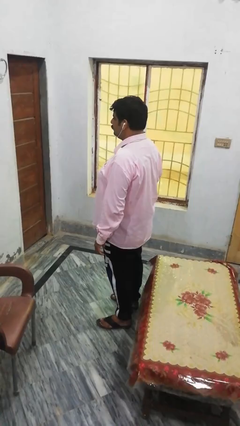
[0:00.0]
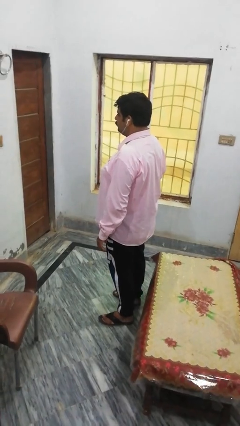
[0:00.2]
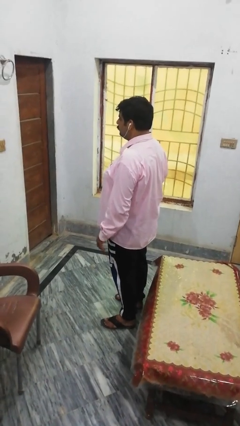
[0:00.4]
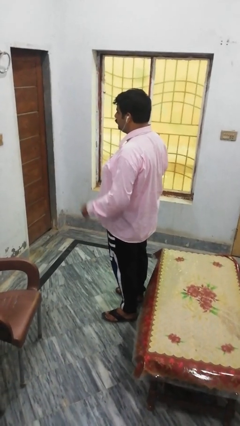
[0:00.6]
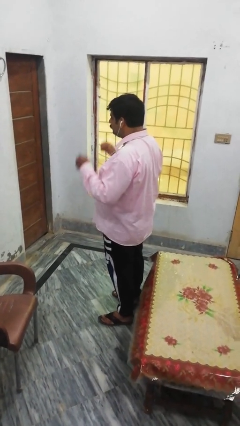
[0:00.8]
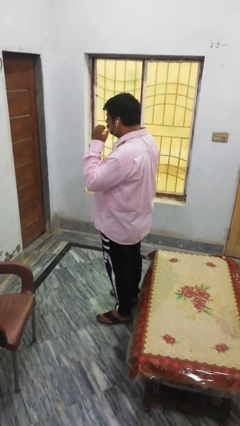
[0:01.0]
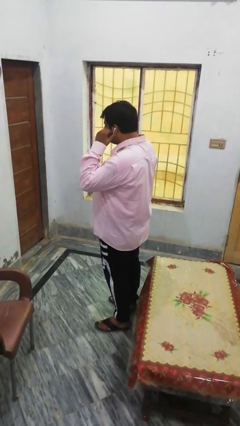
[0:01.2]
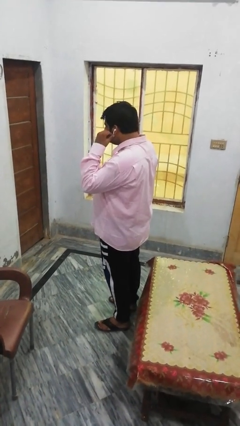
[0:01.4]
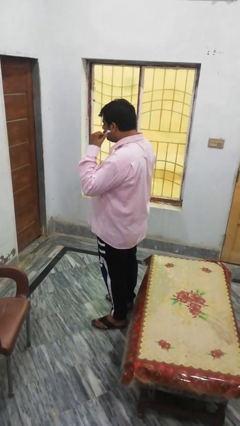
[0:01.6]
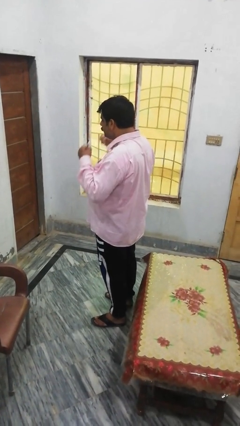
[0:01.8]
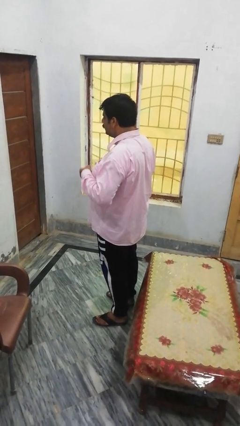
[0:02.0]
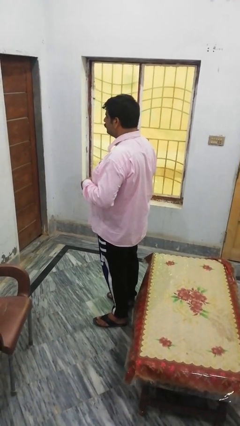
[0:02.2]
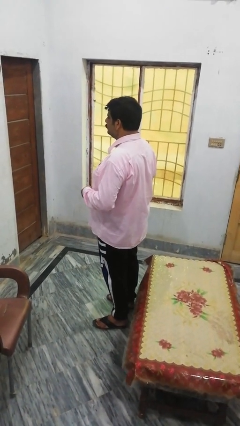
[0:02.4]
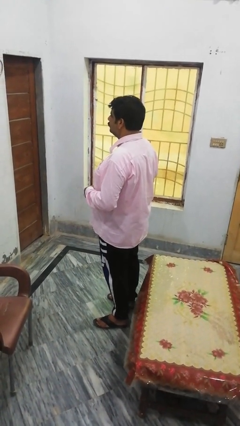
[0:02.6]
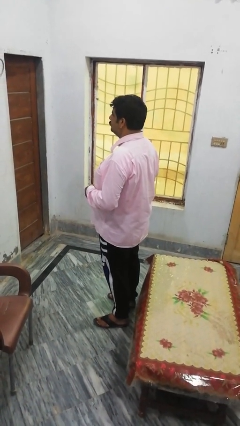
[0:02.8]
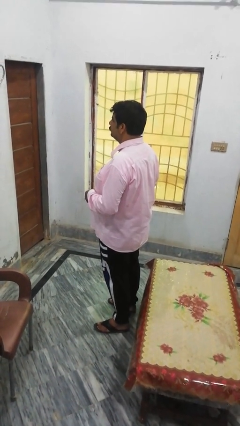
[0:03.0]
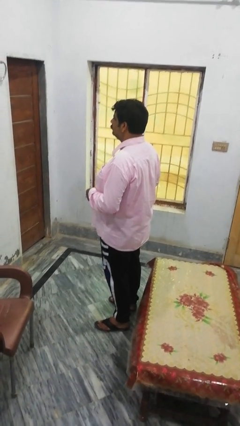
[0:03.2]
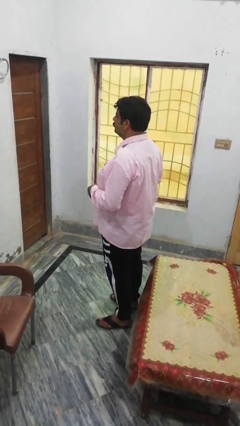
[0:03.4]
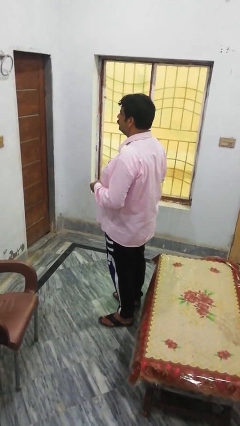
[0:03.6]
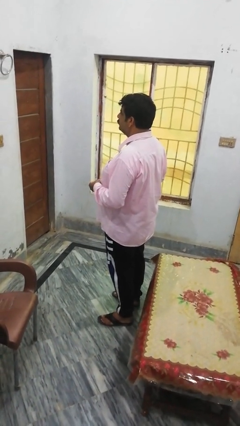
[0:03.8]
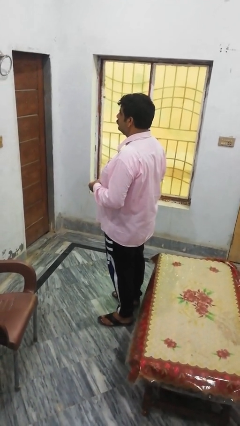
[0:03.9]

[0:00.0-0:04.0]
person takes off headphones

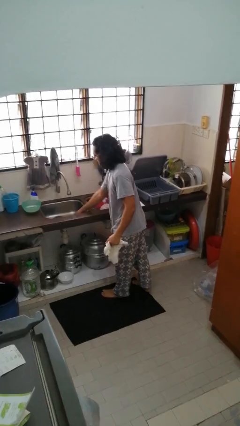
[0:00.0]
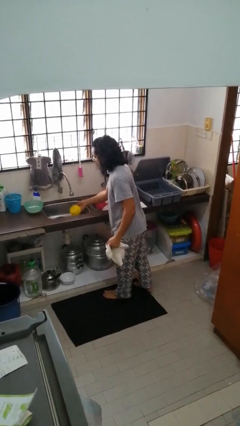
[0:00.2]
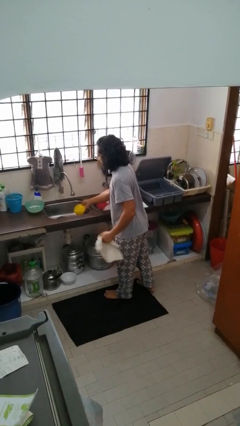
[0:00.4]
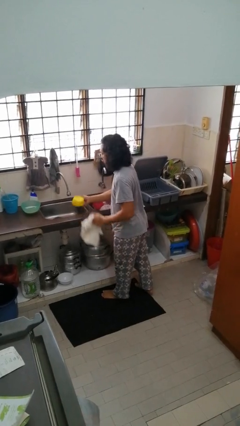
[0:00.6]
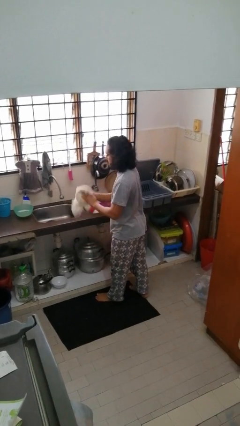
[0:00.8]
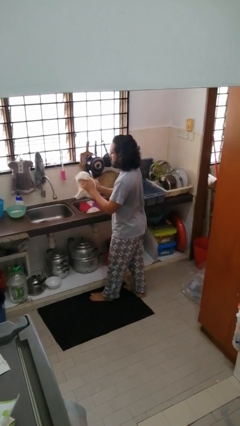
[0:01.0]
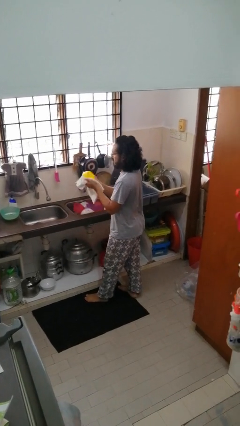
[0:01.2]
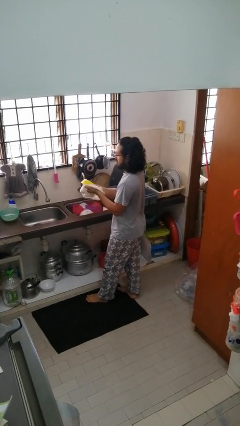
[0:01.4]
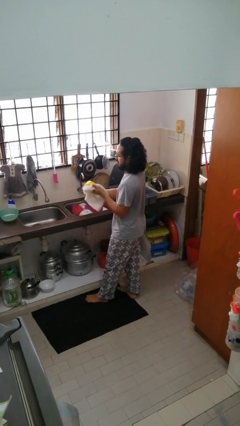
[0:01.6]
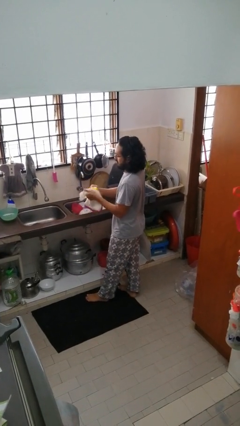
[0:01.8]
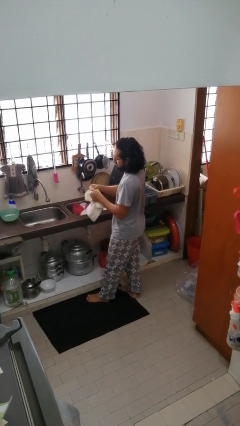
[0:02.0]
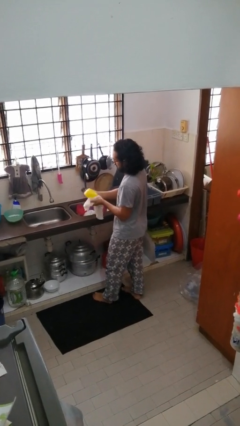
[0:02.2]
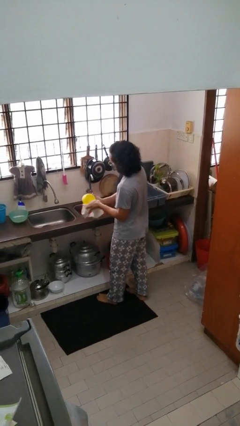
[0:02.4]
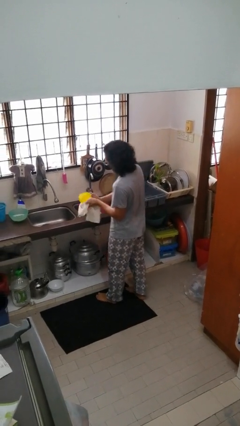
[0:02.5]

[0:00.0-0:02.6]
person dries dish

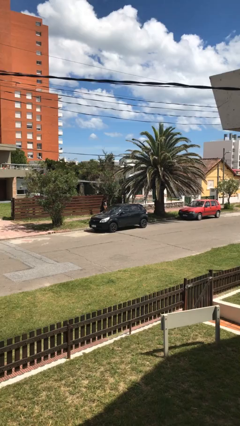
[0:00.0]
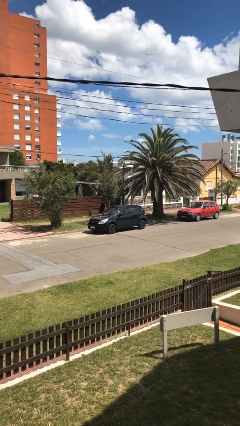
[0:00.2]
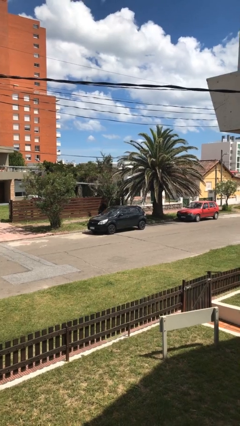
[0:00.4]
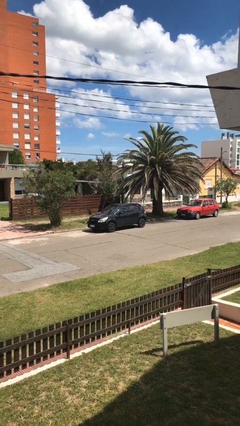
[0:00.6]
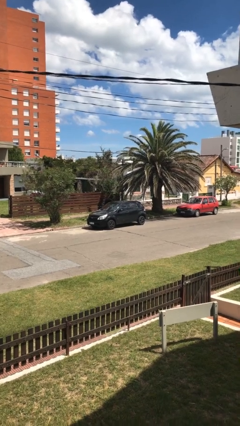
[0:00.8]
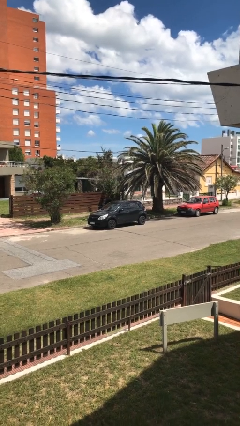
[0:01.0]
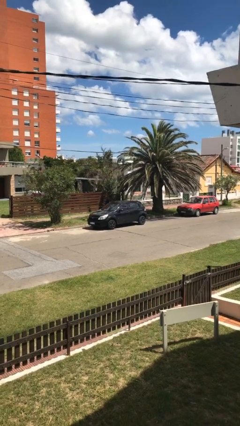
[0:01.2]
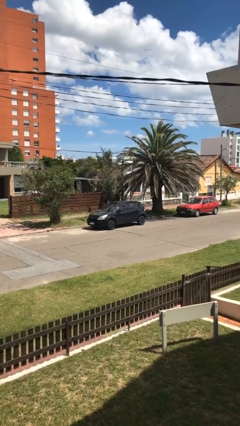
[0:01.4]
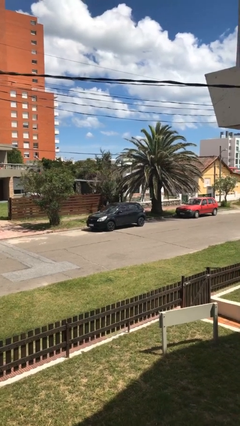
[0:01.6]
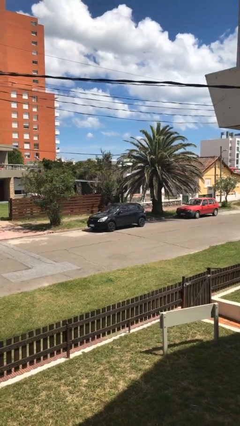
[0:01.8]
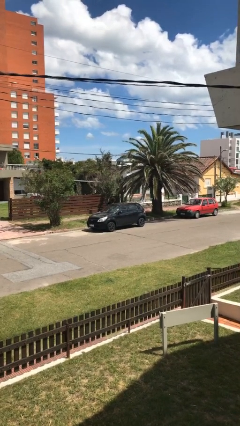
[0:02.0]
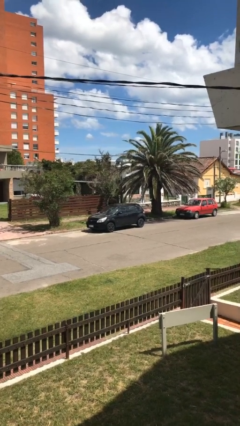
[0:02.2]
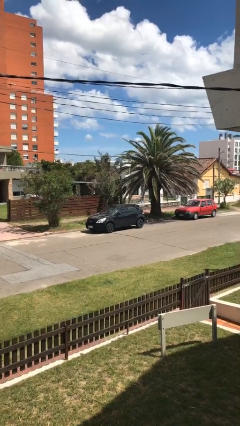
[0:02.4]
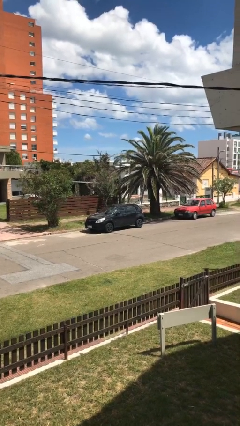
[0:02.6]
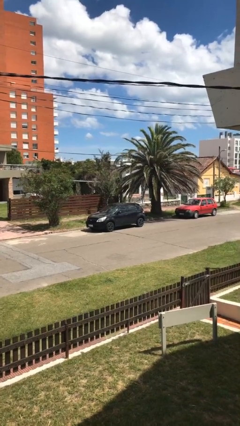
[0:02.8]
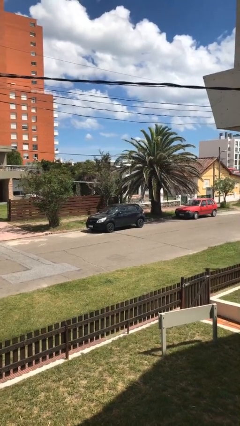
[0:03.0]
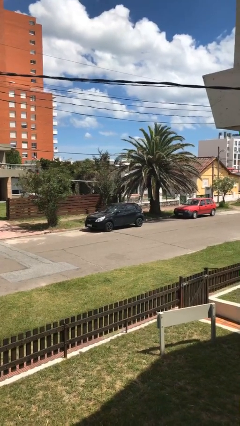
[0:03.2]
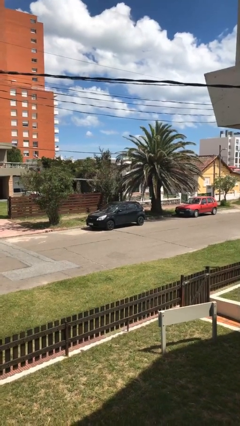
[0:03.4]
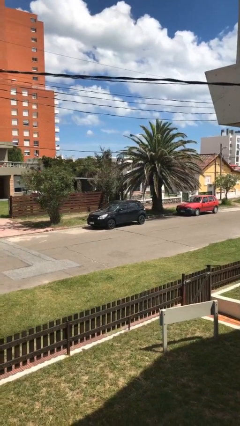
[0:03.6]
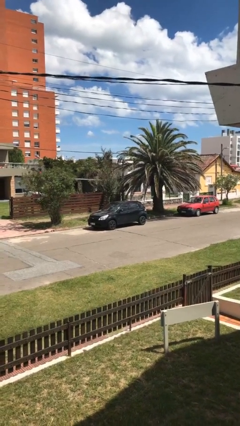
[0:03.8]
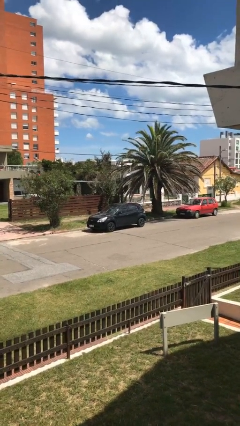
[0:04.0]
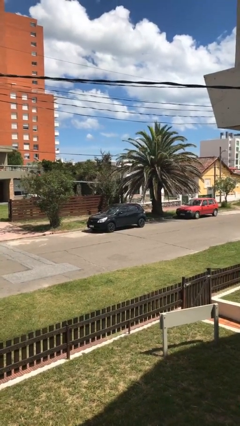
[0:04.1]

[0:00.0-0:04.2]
car picks up person

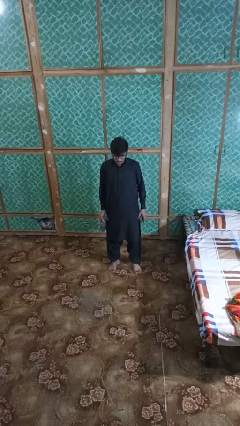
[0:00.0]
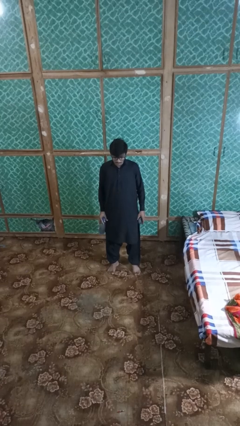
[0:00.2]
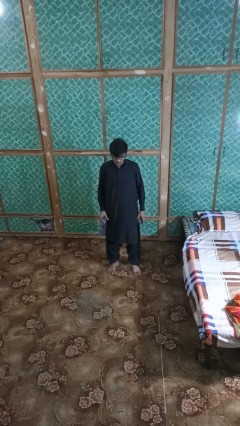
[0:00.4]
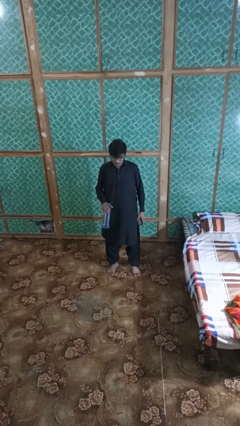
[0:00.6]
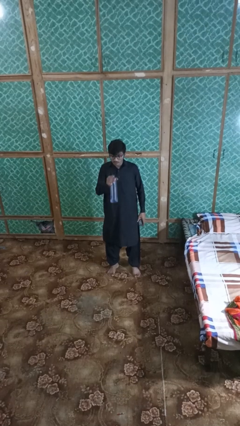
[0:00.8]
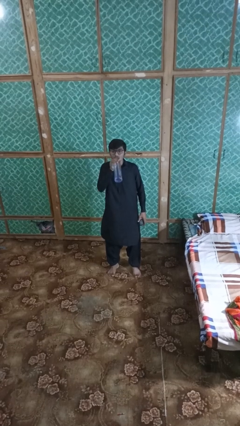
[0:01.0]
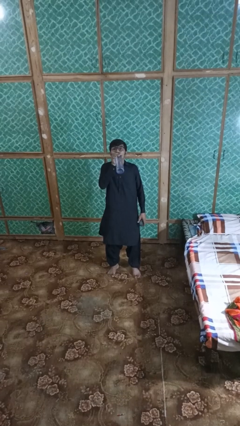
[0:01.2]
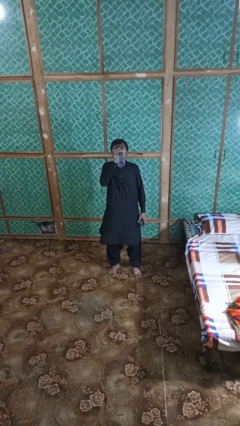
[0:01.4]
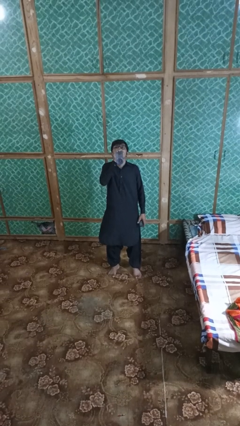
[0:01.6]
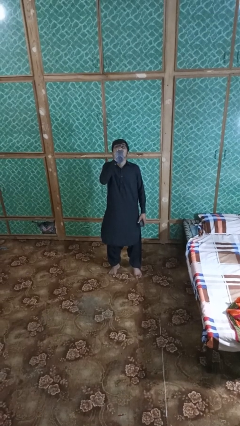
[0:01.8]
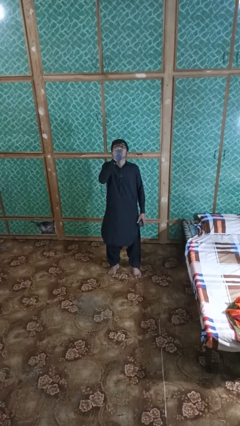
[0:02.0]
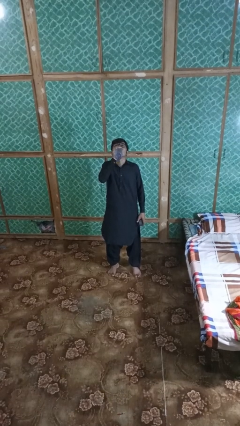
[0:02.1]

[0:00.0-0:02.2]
person drinks from bottle

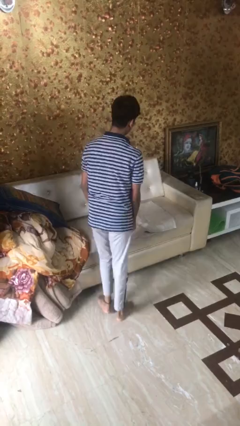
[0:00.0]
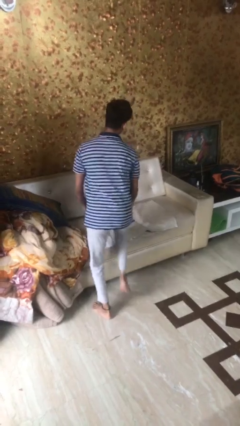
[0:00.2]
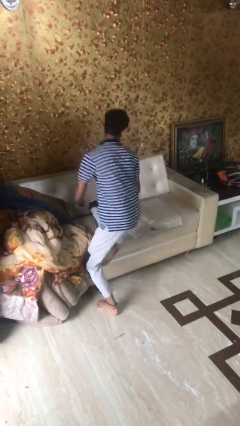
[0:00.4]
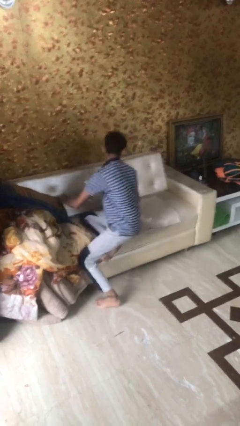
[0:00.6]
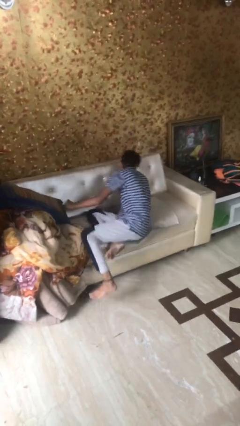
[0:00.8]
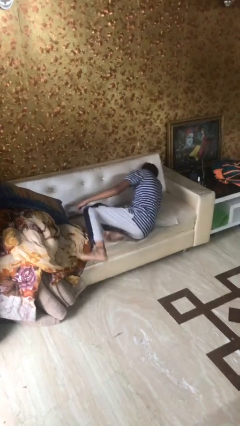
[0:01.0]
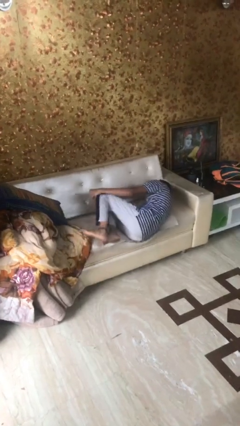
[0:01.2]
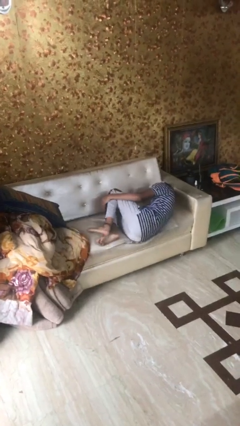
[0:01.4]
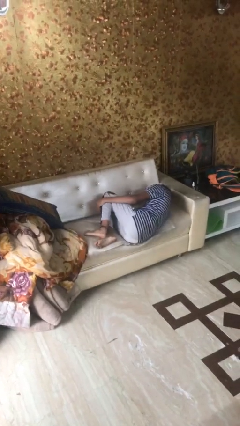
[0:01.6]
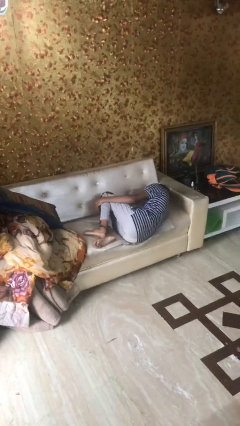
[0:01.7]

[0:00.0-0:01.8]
person lies down on couch

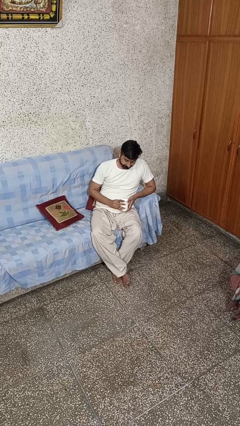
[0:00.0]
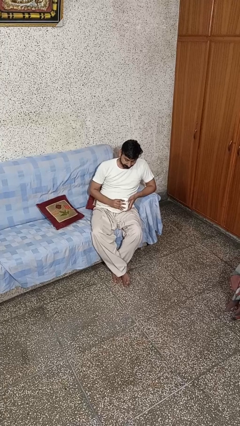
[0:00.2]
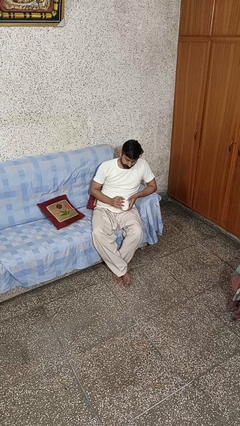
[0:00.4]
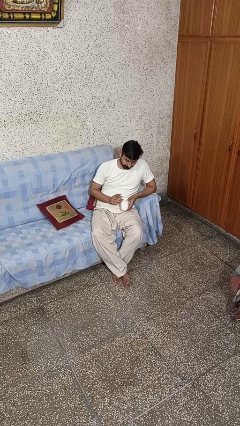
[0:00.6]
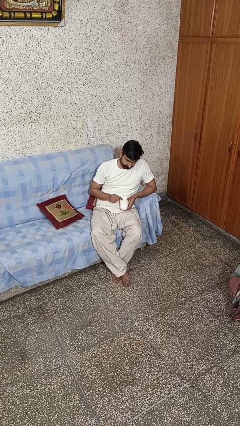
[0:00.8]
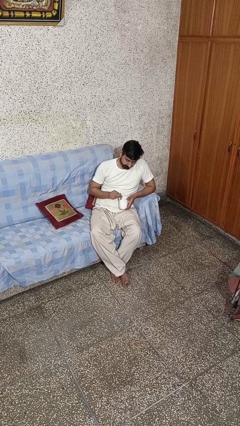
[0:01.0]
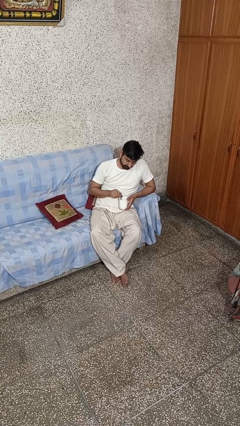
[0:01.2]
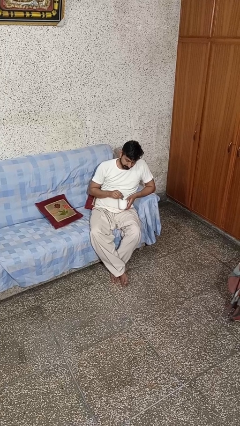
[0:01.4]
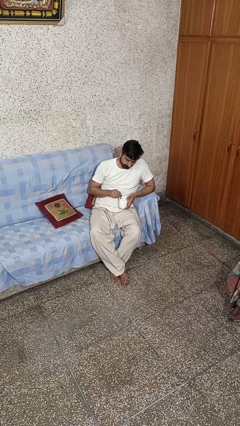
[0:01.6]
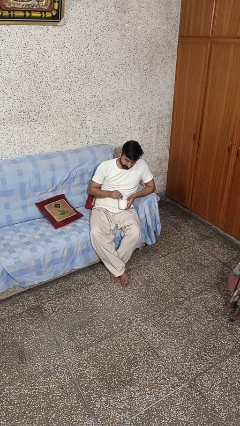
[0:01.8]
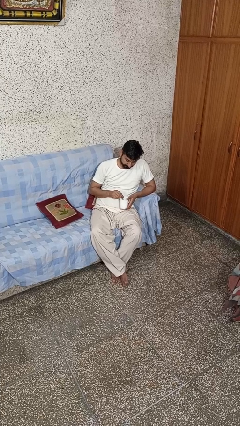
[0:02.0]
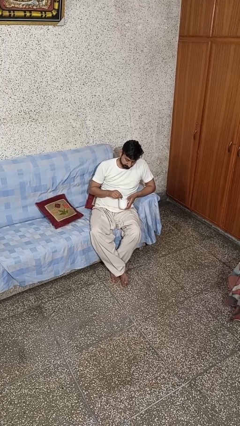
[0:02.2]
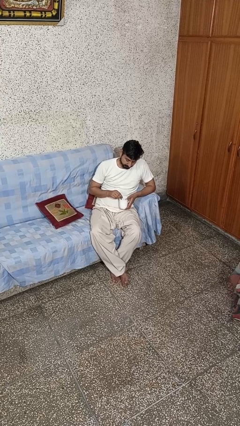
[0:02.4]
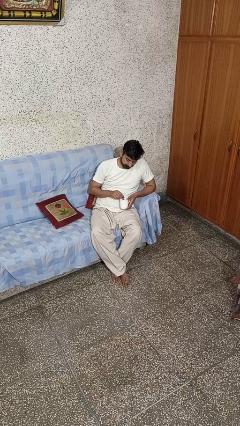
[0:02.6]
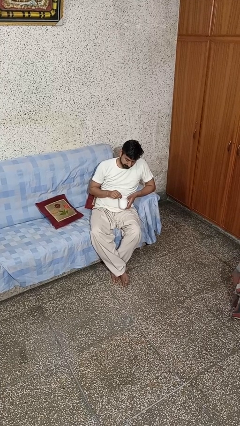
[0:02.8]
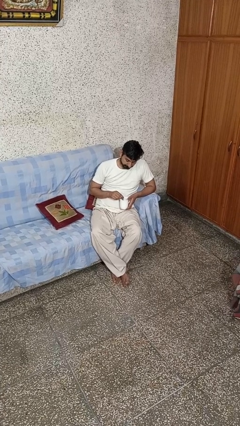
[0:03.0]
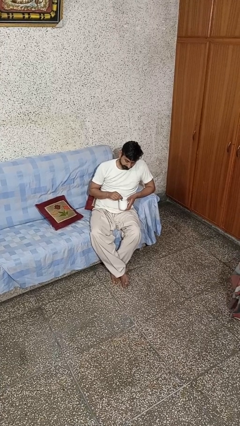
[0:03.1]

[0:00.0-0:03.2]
person stirs mug
